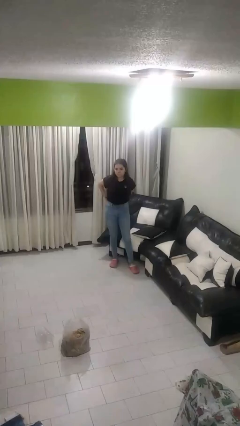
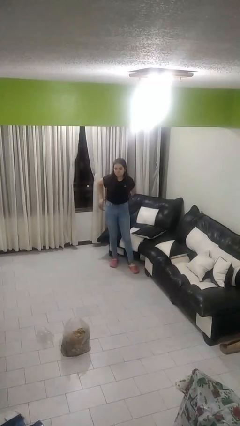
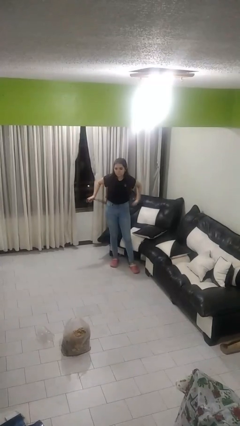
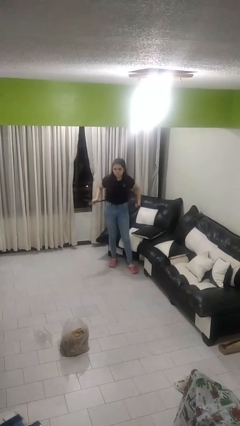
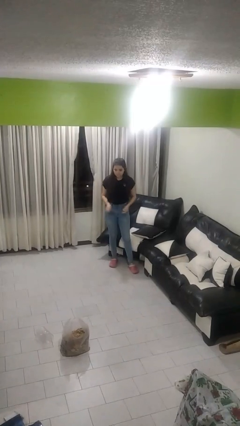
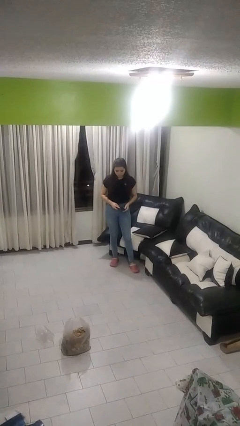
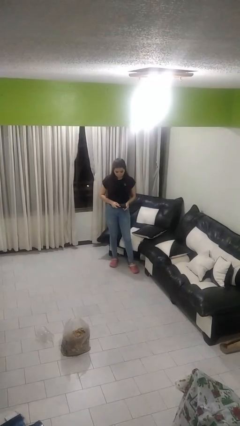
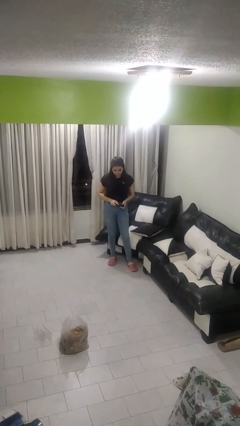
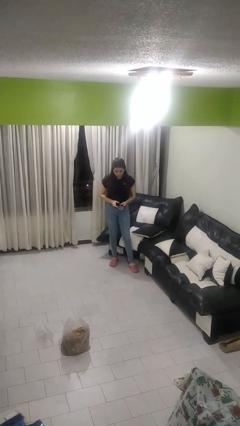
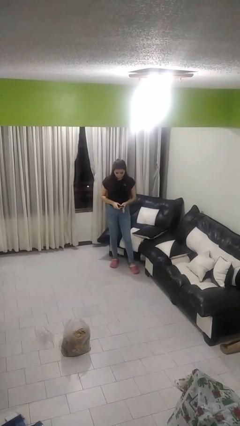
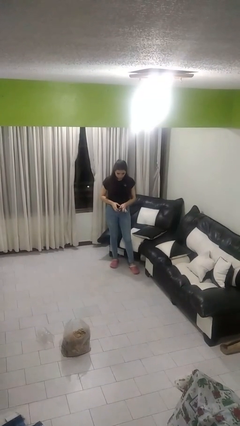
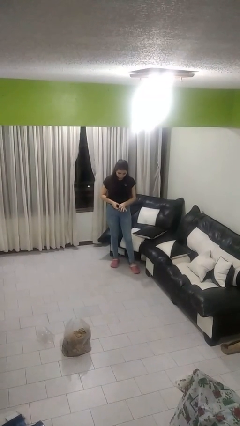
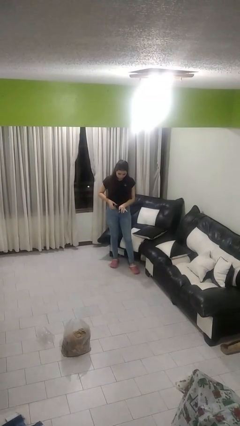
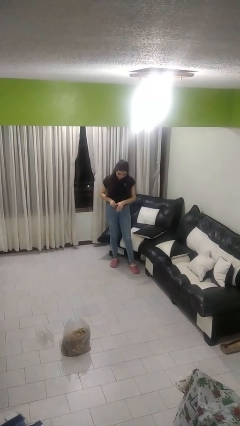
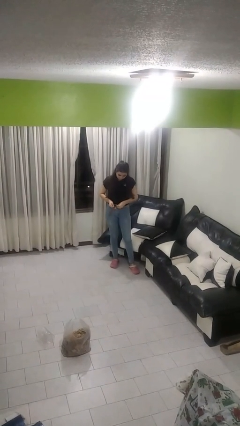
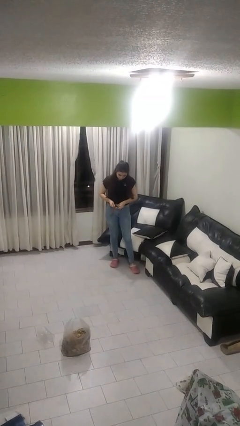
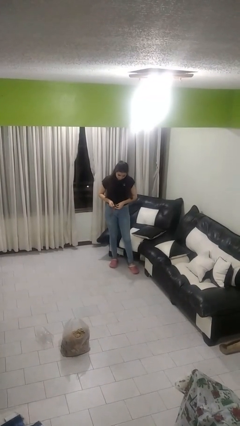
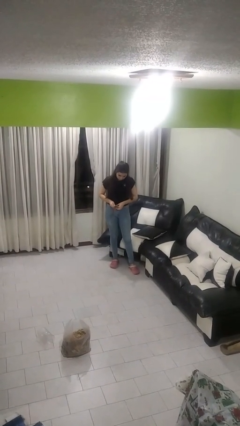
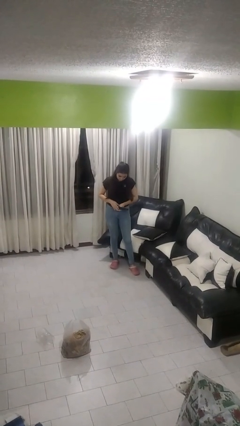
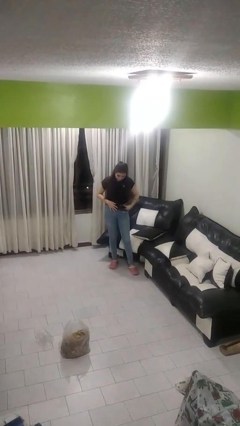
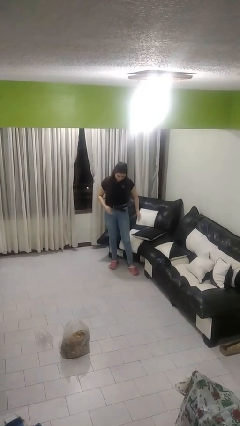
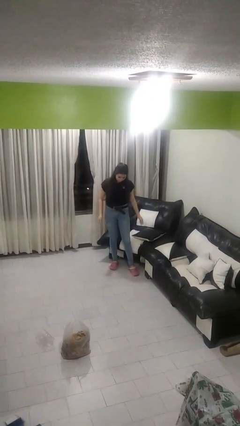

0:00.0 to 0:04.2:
person puts on belt

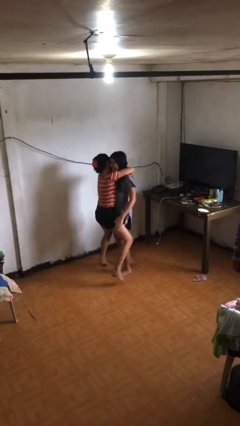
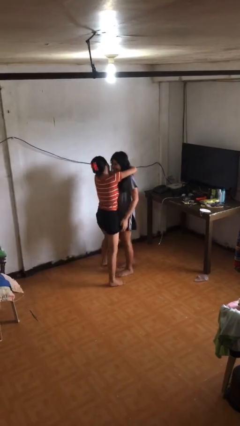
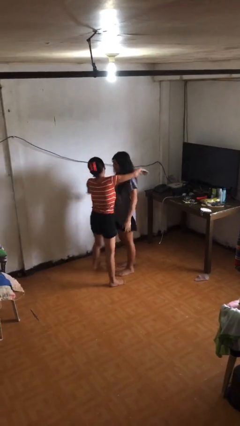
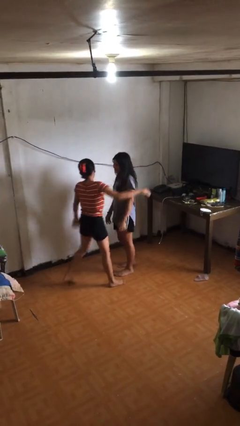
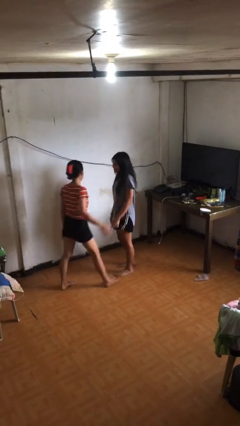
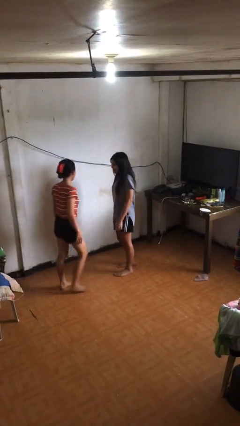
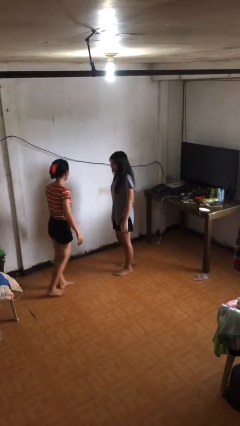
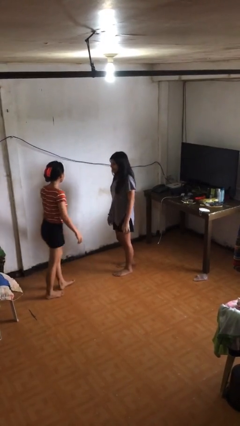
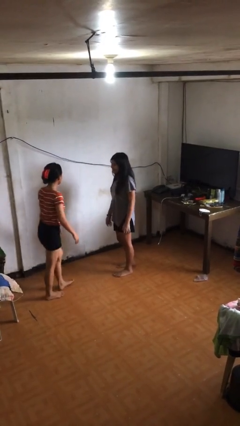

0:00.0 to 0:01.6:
person puts down person

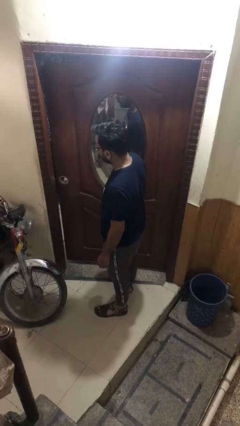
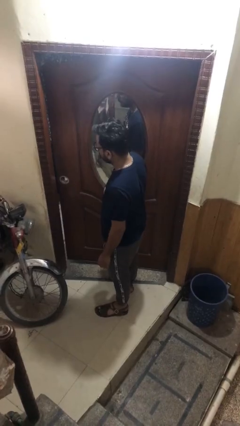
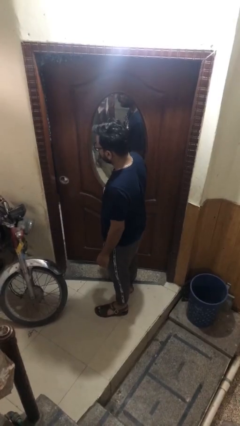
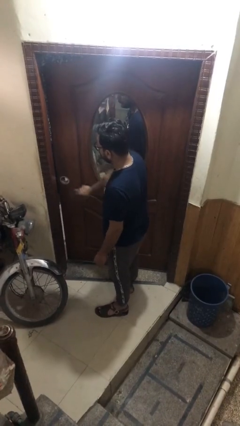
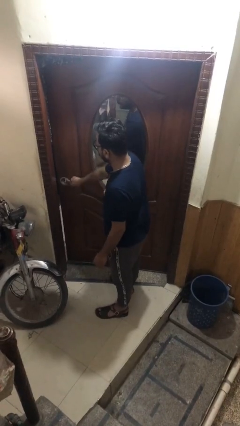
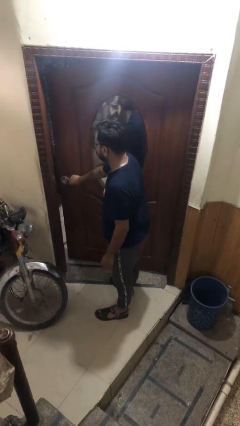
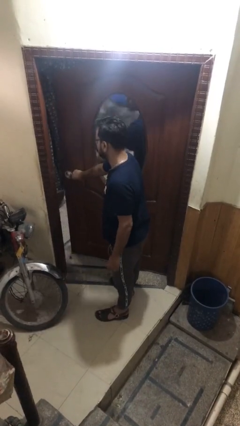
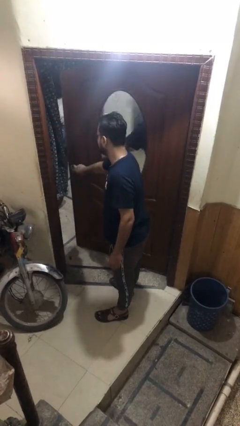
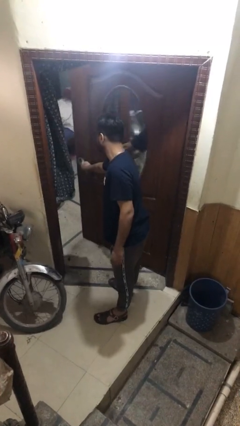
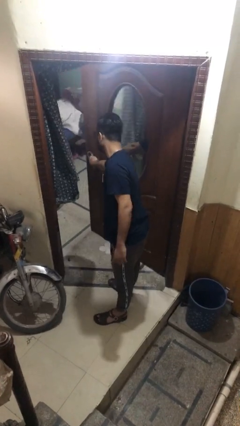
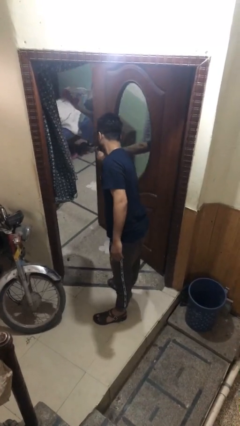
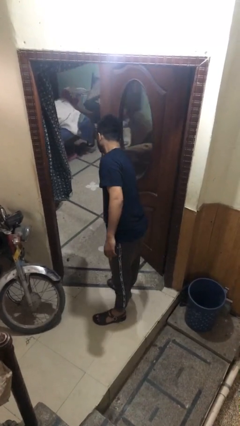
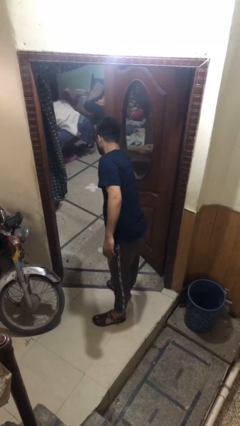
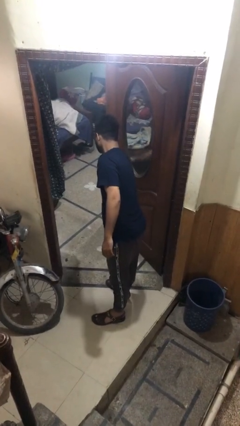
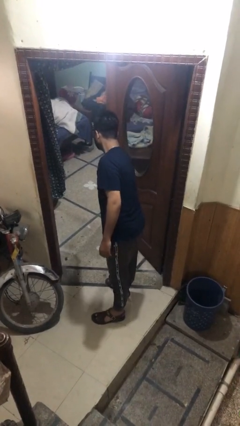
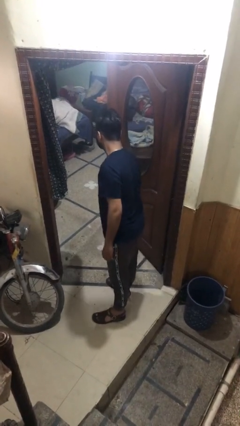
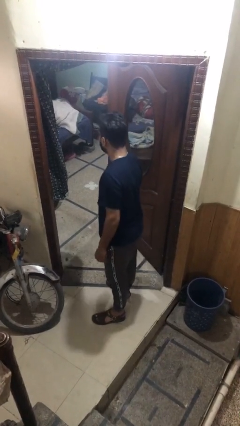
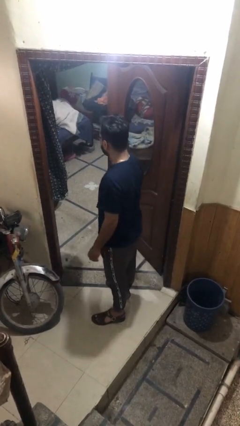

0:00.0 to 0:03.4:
person opens facility door

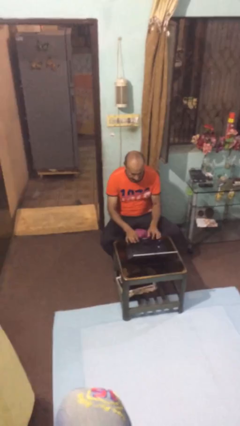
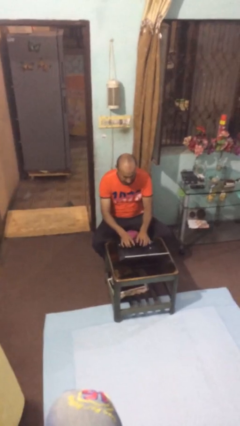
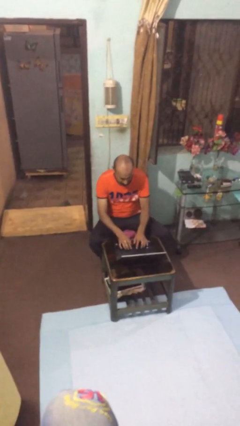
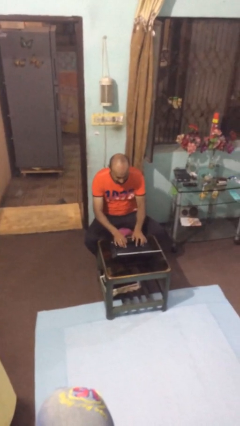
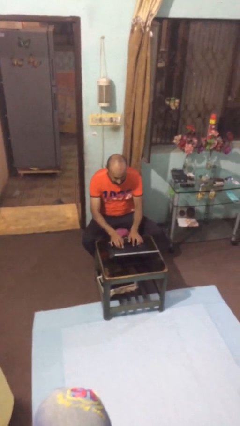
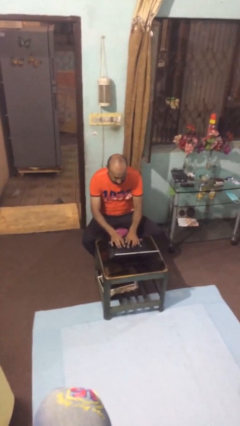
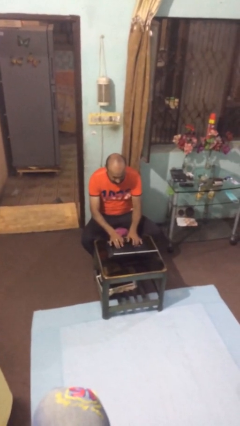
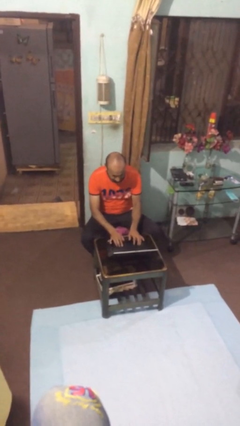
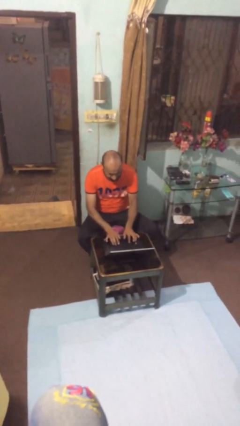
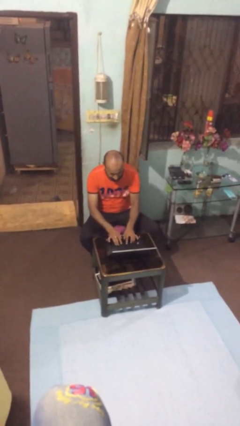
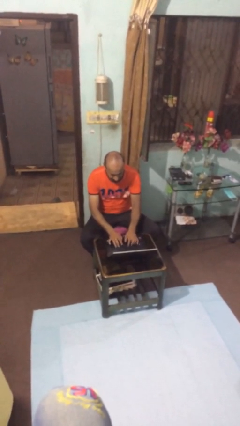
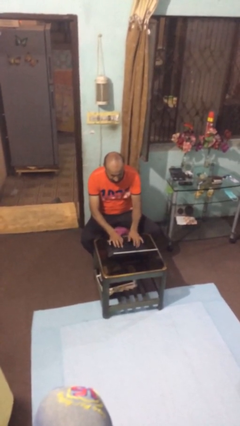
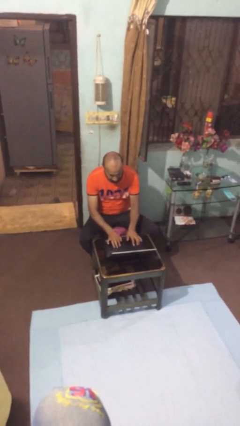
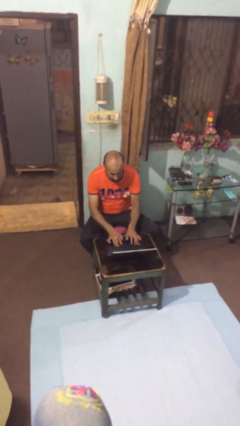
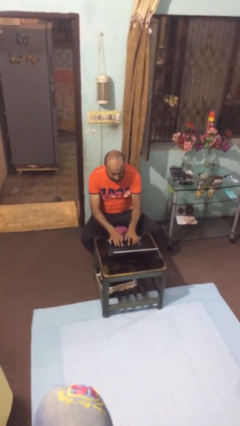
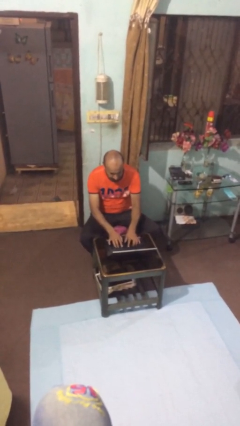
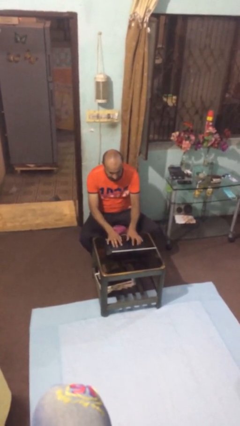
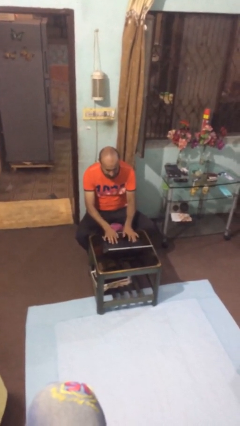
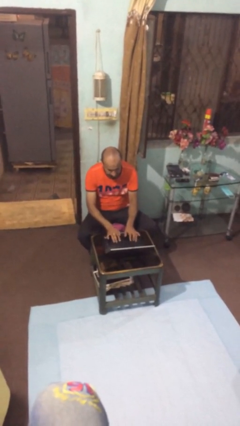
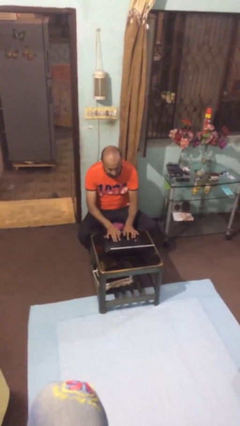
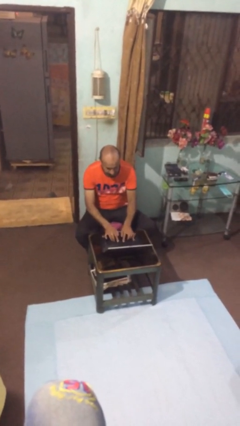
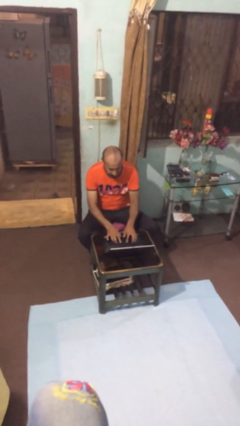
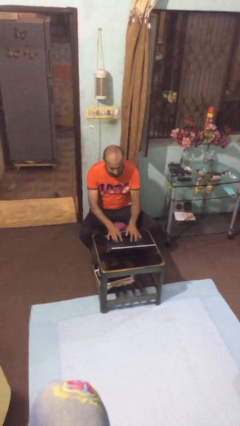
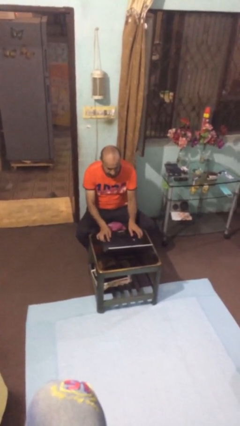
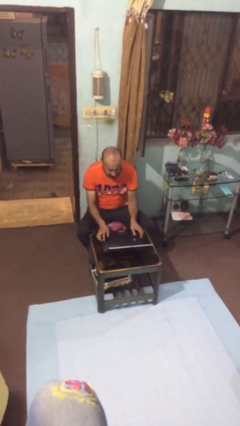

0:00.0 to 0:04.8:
person interacts with laptop

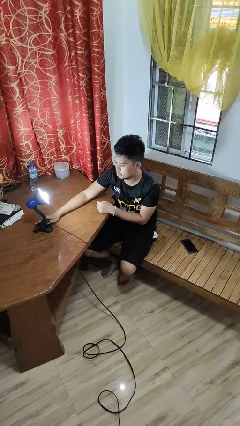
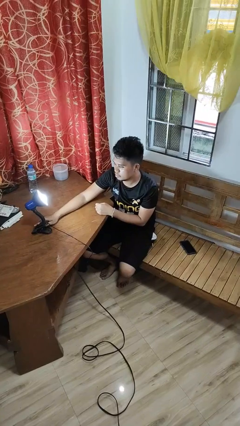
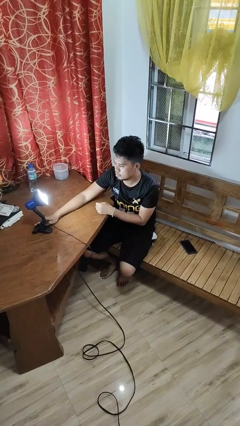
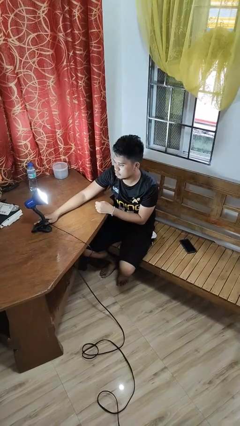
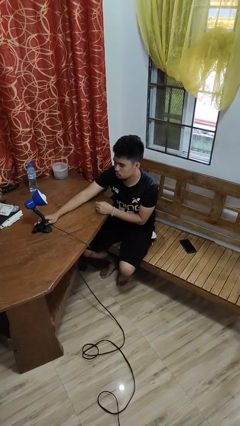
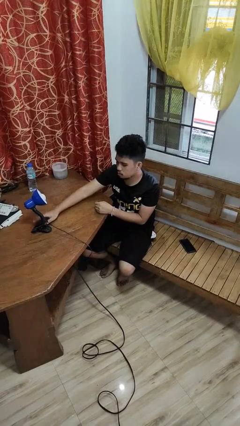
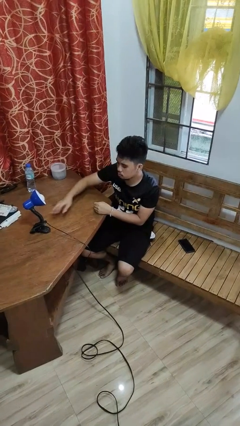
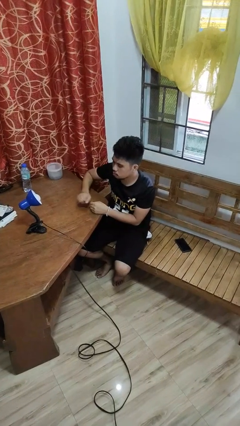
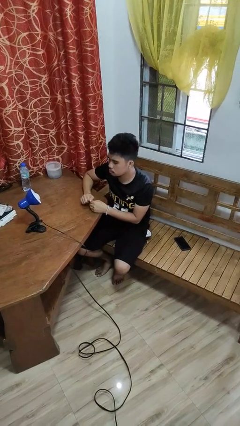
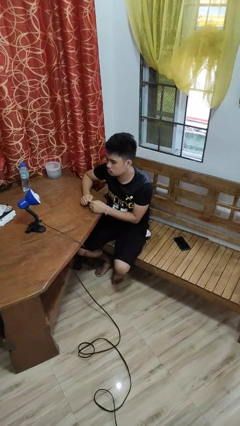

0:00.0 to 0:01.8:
person turns off lamp

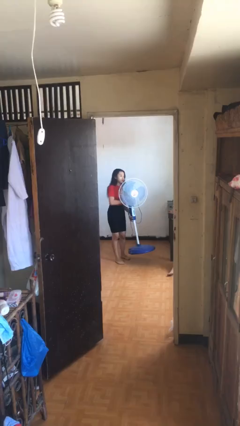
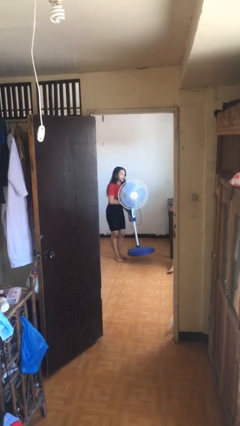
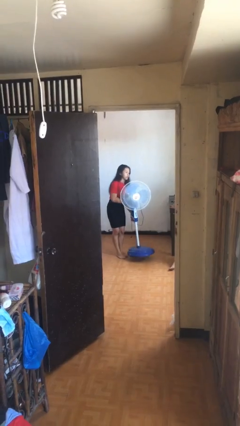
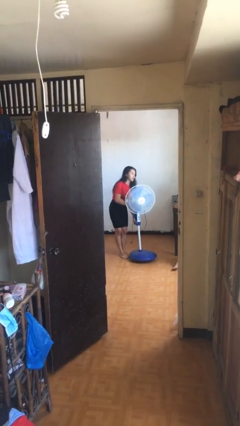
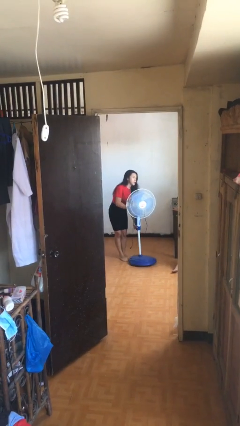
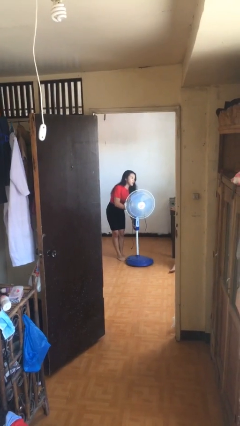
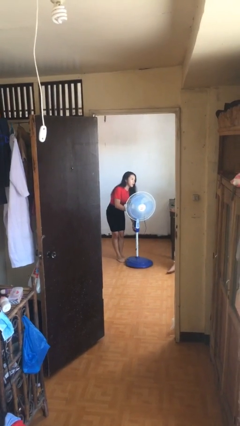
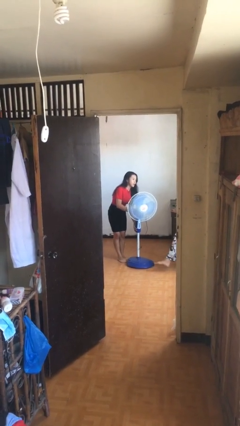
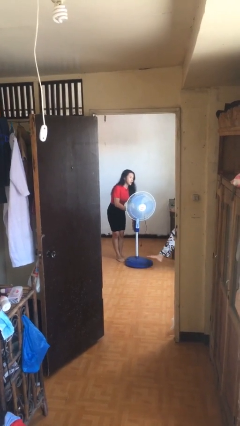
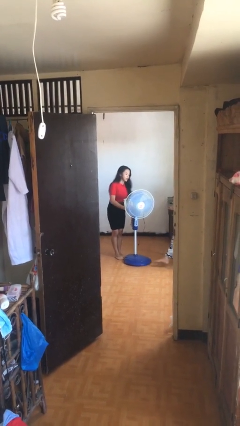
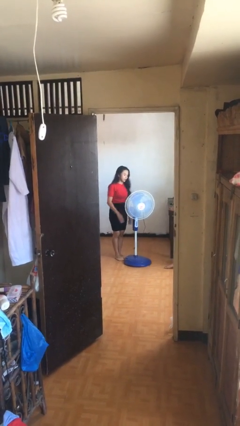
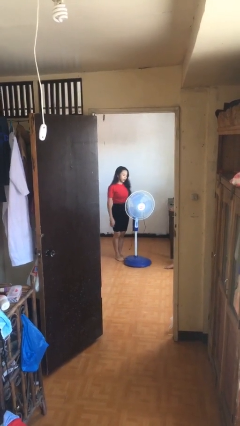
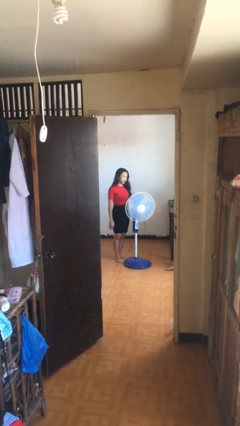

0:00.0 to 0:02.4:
person puts down object on floor
